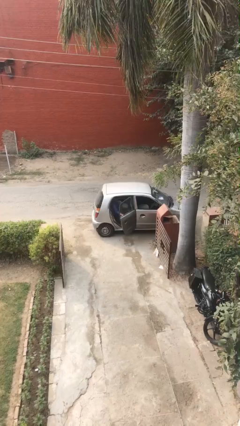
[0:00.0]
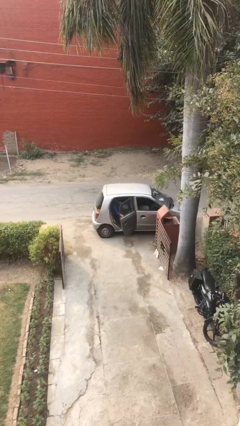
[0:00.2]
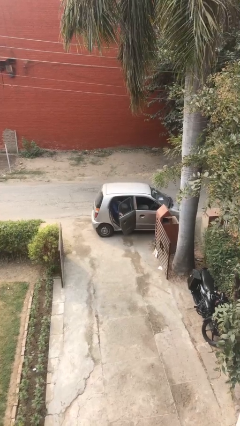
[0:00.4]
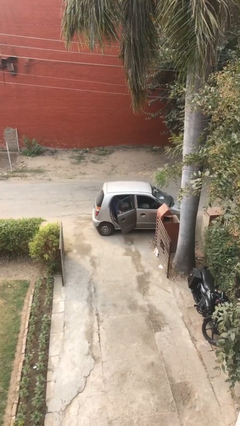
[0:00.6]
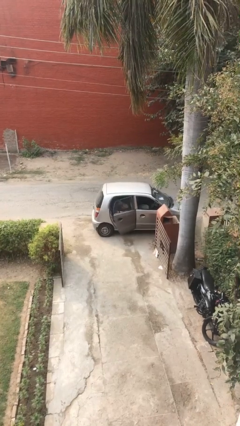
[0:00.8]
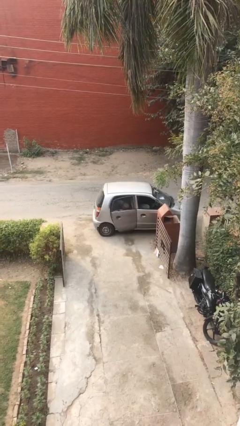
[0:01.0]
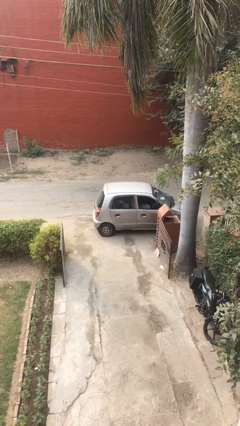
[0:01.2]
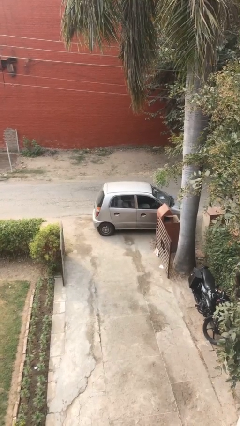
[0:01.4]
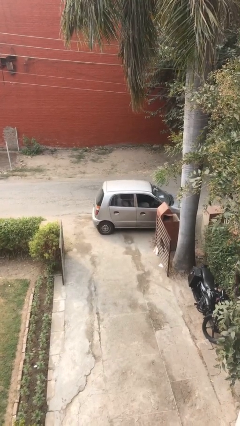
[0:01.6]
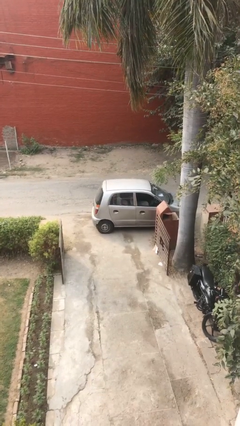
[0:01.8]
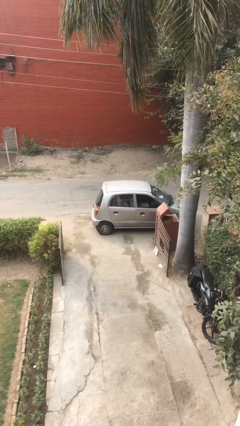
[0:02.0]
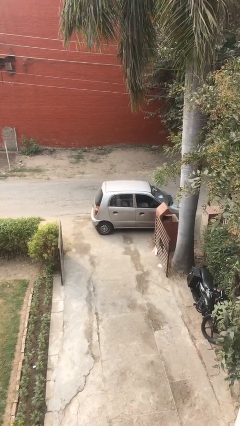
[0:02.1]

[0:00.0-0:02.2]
person closes car door

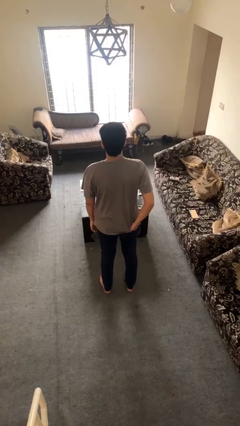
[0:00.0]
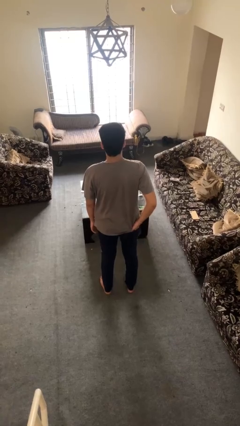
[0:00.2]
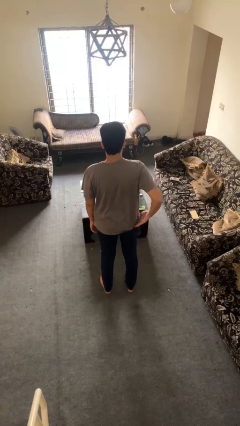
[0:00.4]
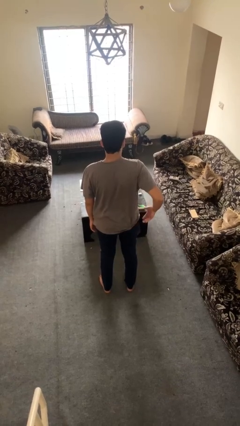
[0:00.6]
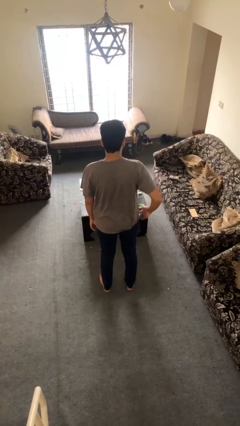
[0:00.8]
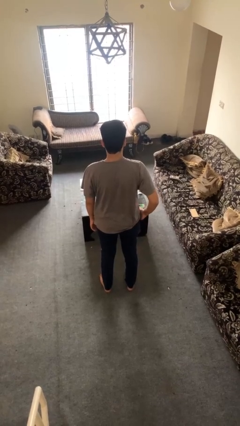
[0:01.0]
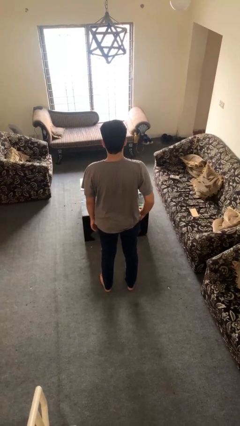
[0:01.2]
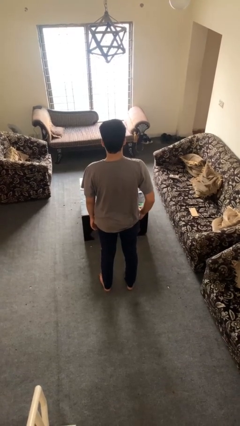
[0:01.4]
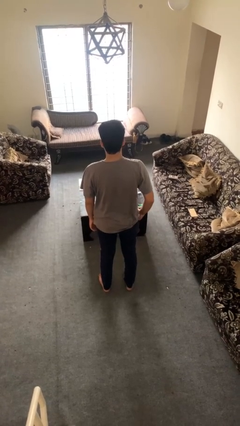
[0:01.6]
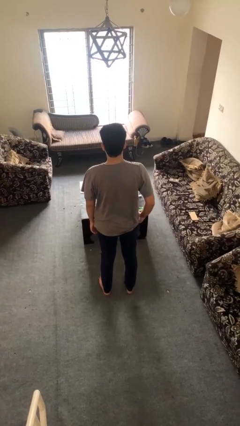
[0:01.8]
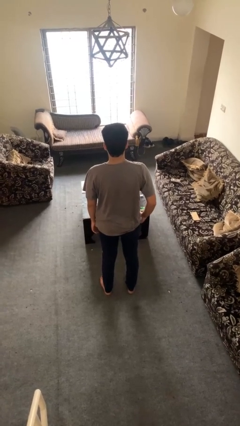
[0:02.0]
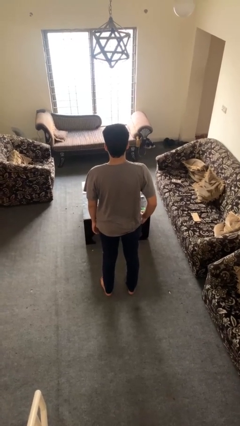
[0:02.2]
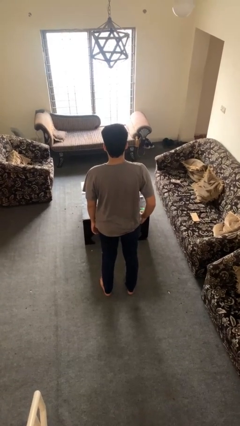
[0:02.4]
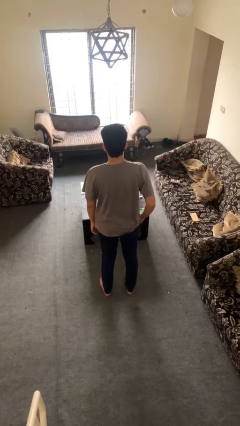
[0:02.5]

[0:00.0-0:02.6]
person puts hands in back pockets

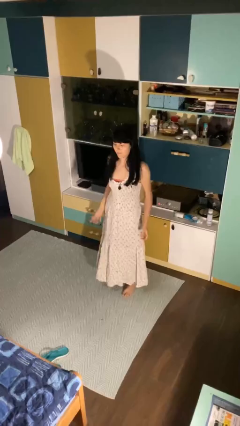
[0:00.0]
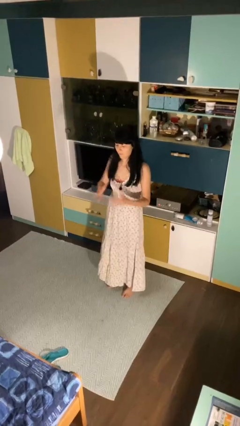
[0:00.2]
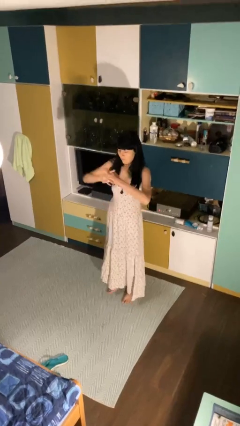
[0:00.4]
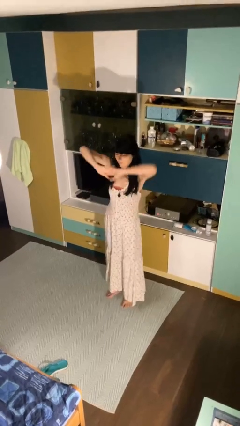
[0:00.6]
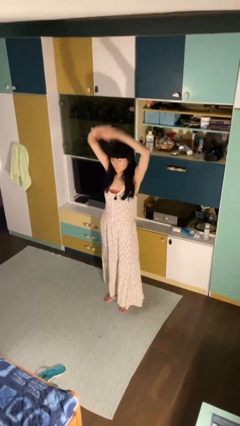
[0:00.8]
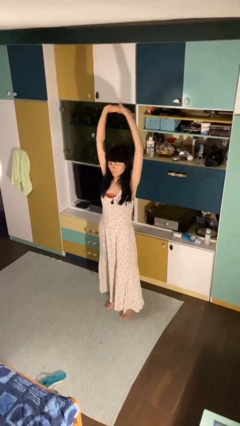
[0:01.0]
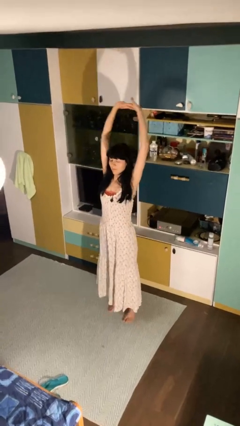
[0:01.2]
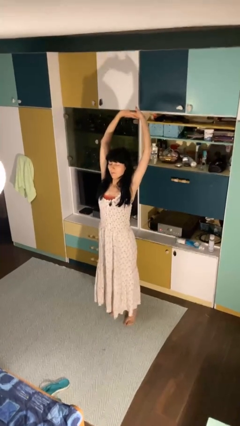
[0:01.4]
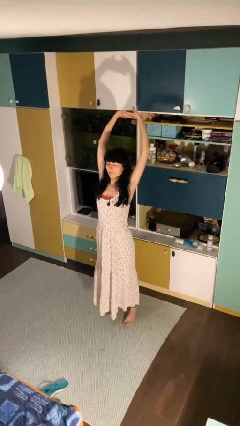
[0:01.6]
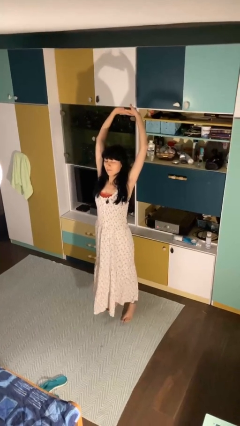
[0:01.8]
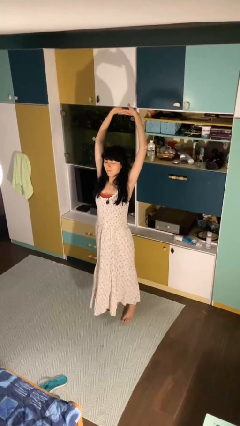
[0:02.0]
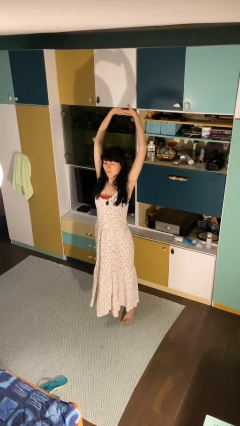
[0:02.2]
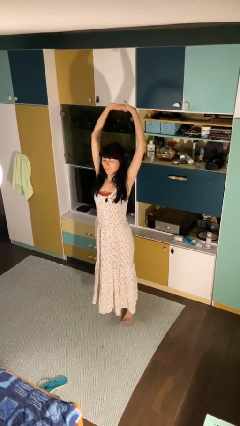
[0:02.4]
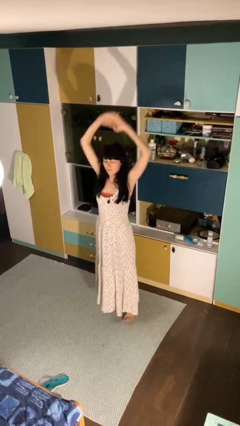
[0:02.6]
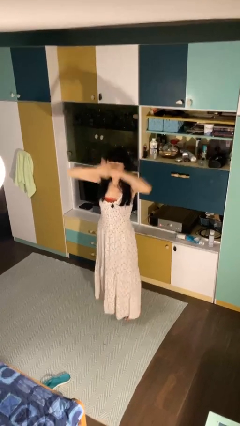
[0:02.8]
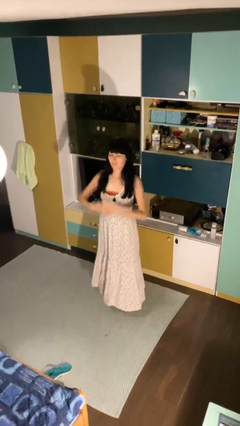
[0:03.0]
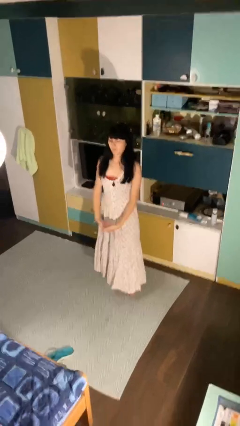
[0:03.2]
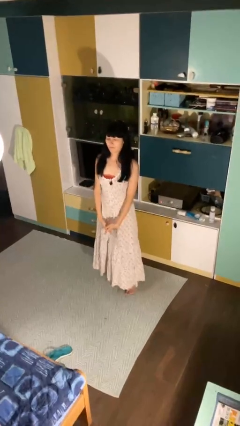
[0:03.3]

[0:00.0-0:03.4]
person stretches arms over head

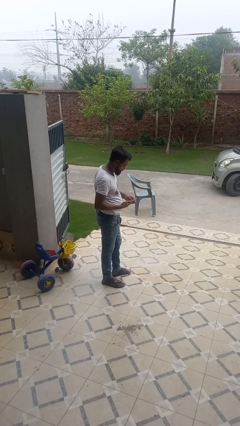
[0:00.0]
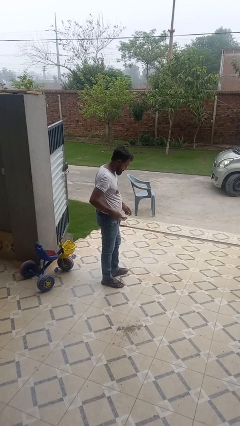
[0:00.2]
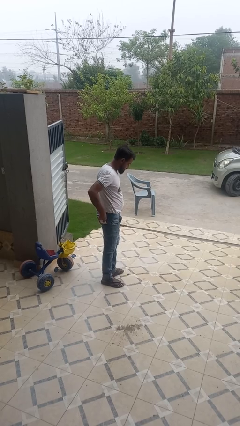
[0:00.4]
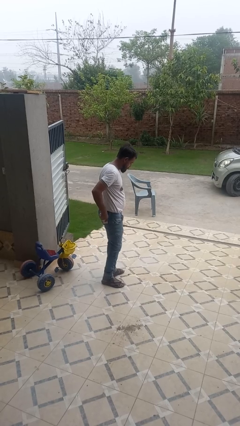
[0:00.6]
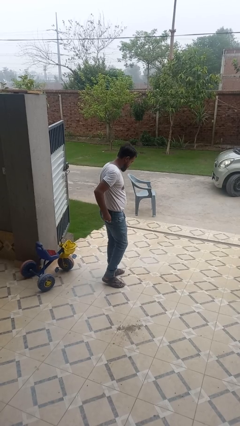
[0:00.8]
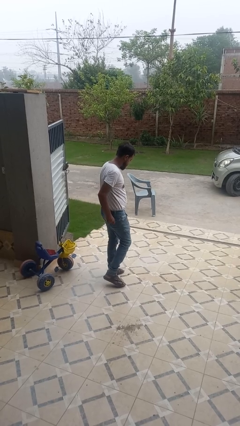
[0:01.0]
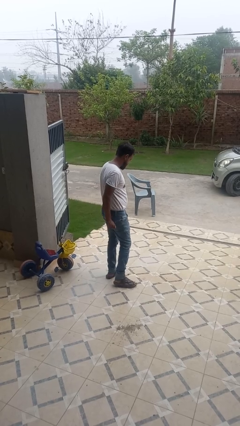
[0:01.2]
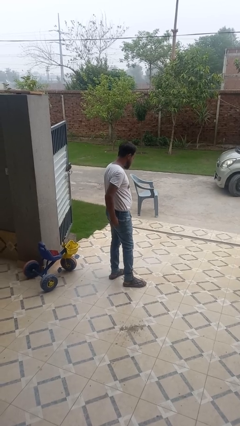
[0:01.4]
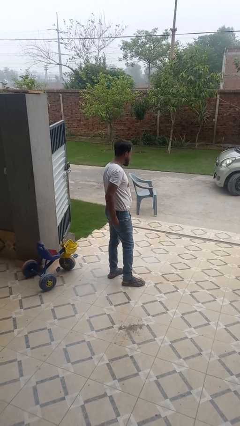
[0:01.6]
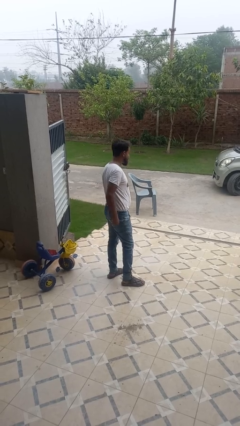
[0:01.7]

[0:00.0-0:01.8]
person puts phone into pocket

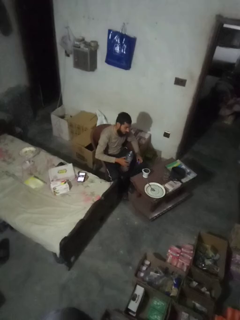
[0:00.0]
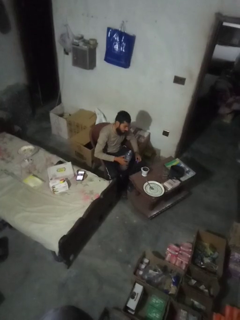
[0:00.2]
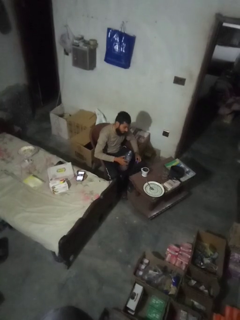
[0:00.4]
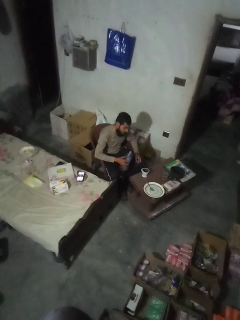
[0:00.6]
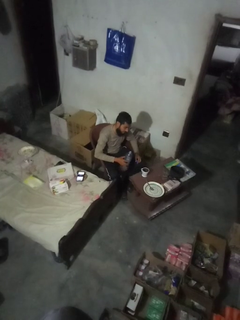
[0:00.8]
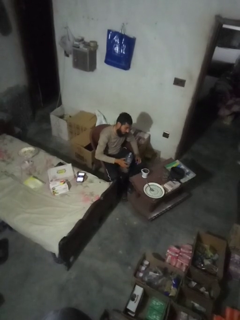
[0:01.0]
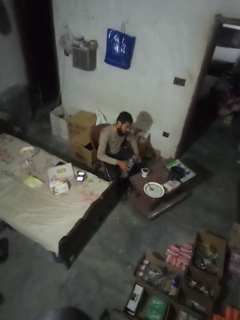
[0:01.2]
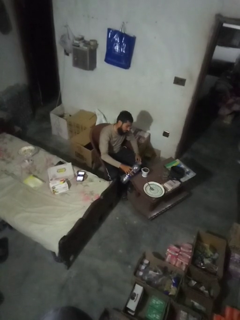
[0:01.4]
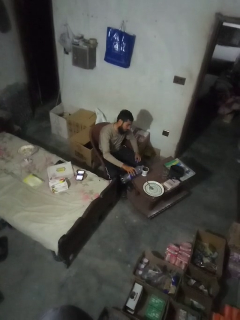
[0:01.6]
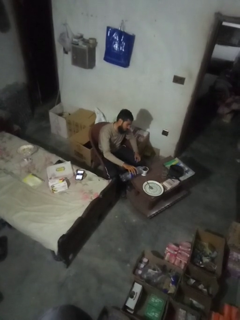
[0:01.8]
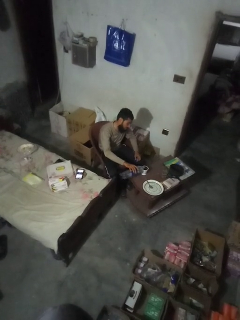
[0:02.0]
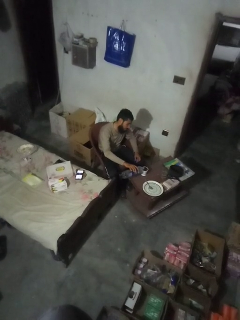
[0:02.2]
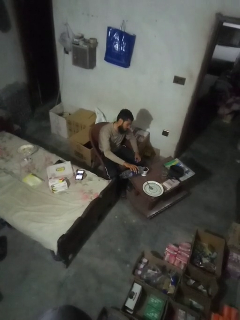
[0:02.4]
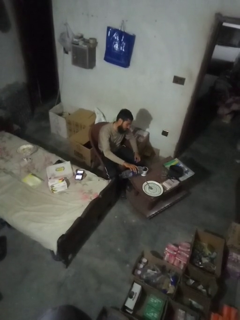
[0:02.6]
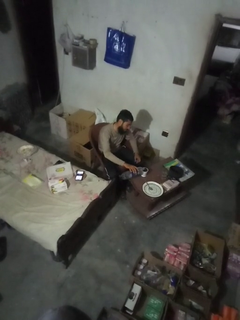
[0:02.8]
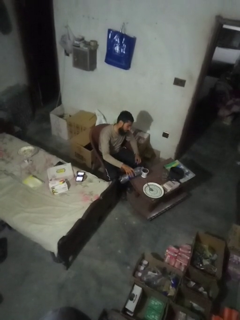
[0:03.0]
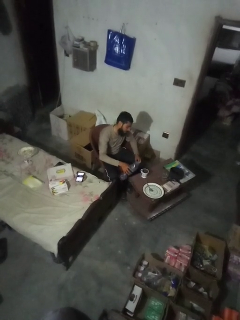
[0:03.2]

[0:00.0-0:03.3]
person pours liquid into cup

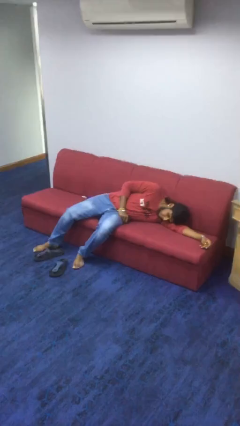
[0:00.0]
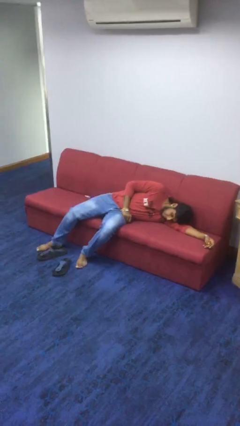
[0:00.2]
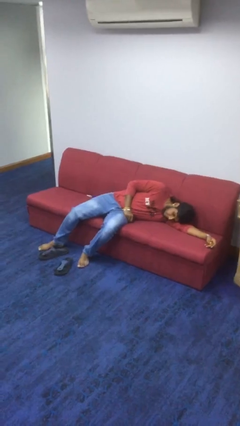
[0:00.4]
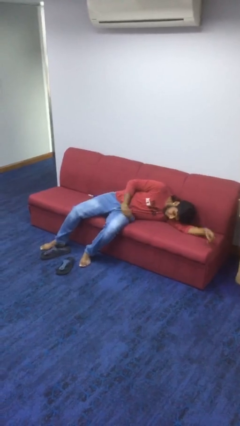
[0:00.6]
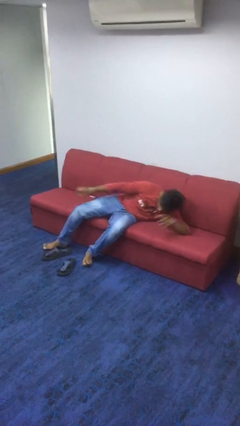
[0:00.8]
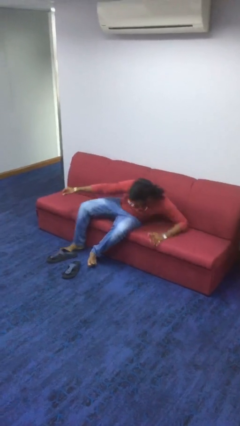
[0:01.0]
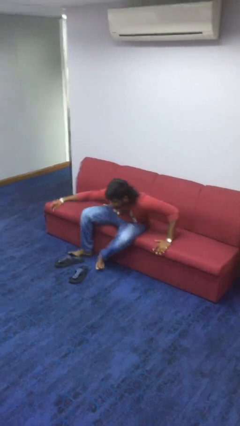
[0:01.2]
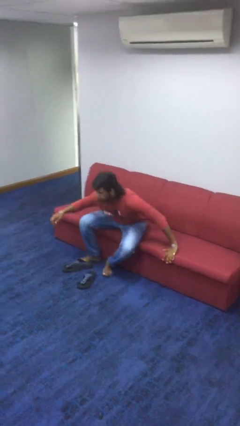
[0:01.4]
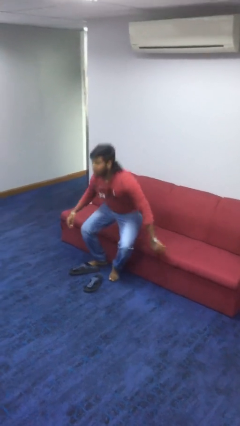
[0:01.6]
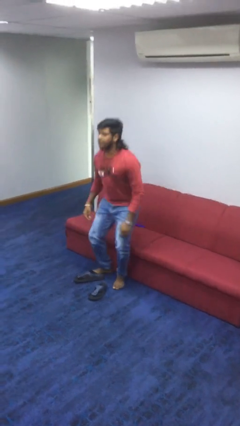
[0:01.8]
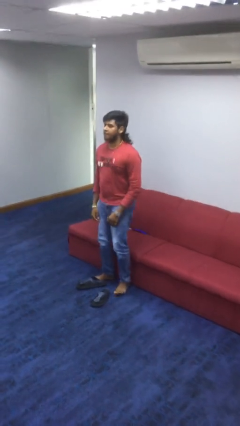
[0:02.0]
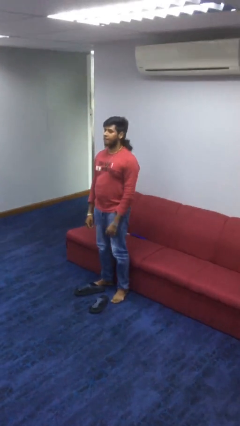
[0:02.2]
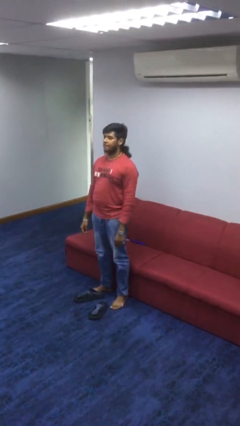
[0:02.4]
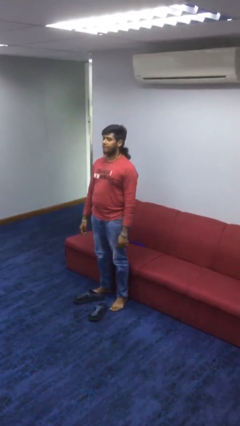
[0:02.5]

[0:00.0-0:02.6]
person stands up

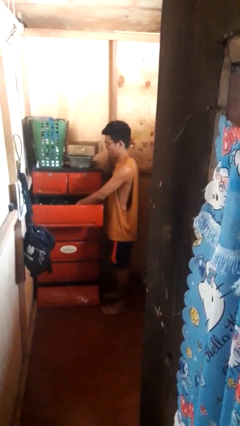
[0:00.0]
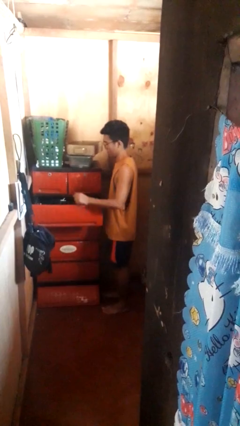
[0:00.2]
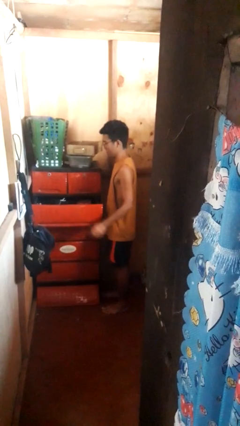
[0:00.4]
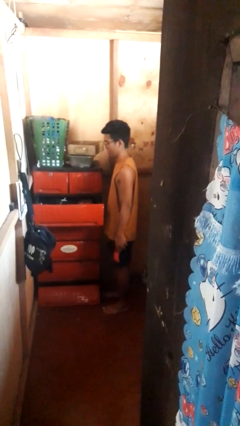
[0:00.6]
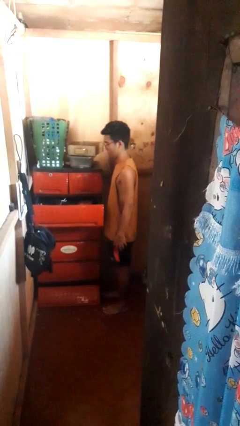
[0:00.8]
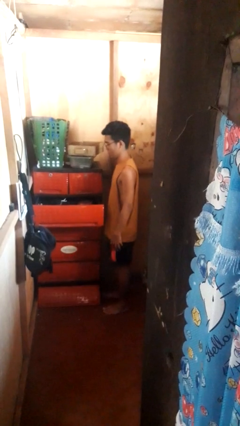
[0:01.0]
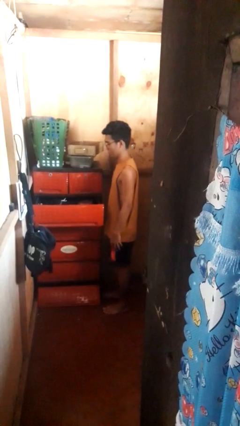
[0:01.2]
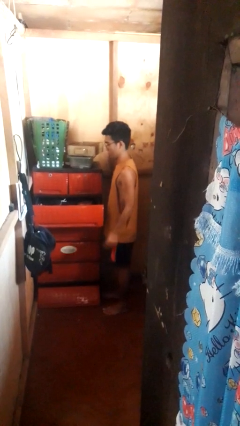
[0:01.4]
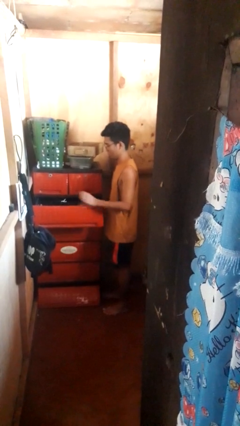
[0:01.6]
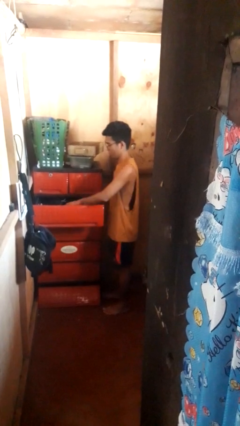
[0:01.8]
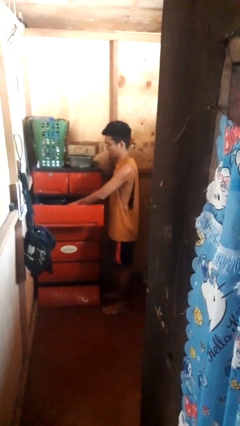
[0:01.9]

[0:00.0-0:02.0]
person puts clothes into dresser

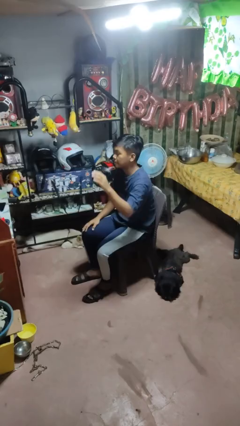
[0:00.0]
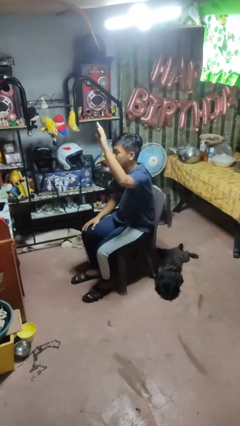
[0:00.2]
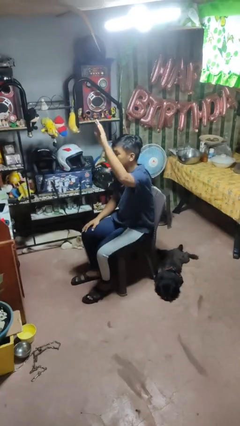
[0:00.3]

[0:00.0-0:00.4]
person gestures raise hand
